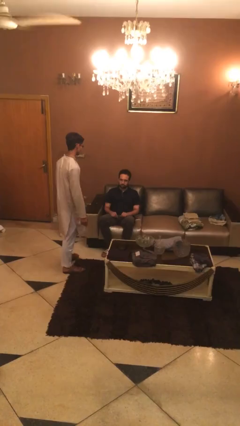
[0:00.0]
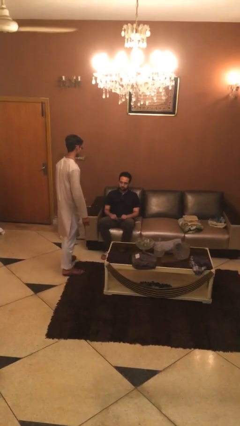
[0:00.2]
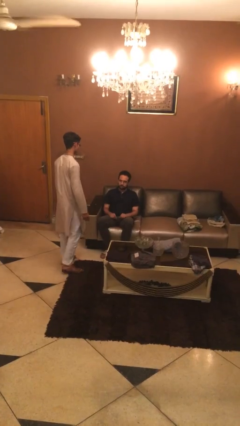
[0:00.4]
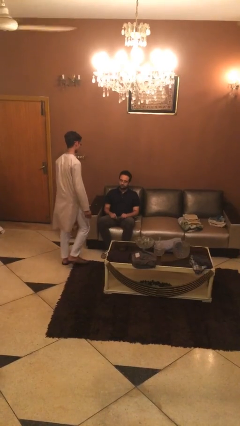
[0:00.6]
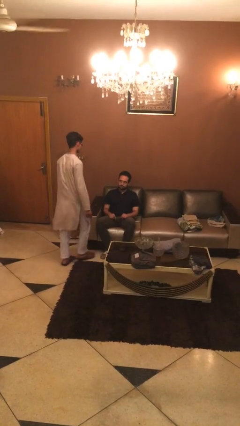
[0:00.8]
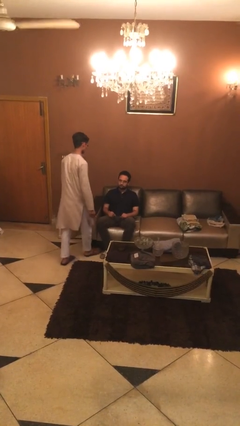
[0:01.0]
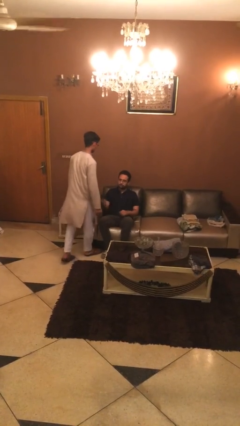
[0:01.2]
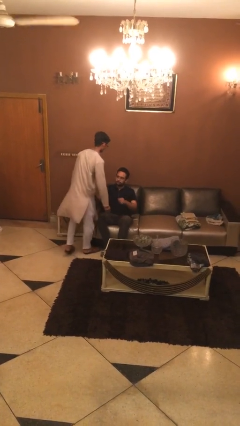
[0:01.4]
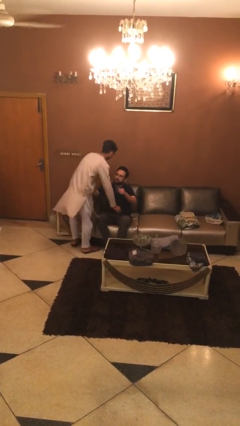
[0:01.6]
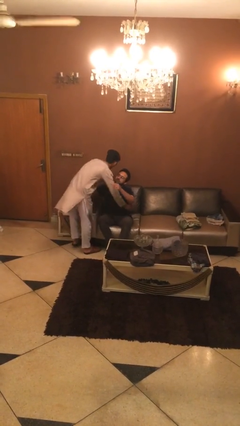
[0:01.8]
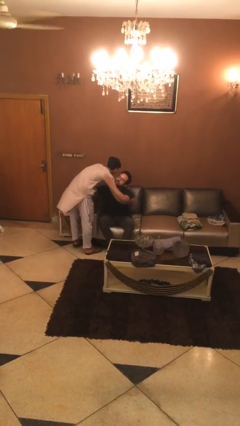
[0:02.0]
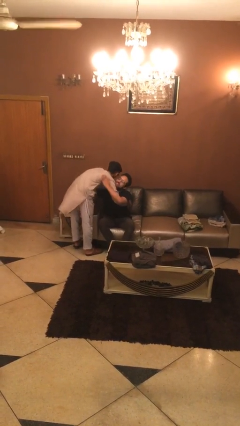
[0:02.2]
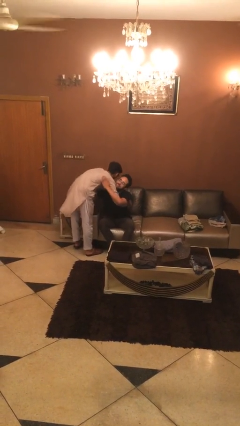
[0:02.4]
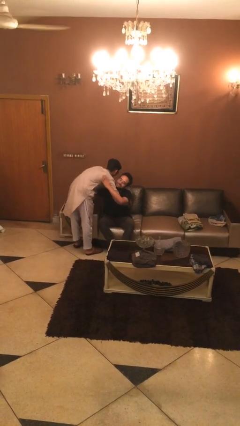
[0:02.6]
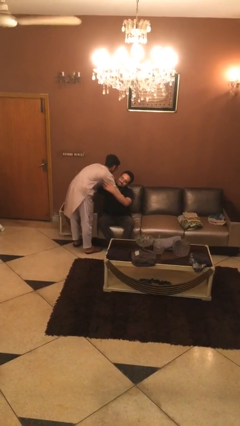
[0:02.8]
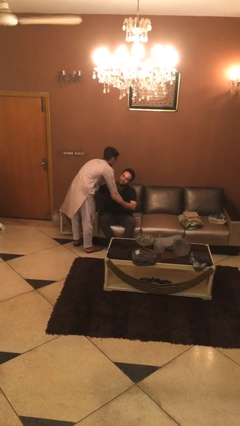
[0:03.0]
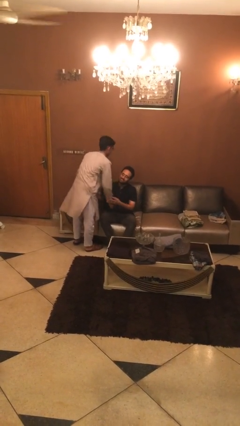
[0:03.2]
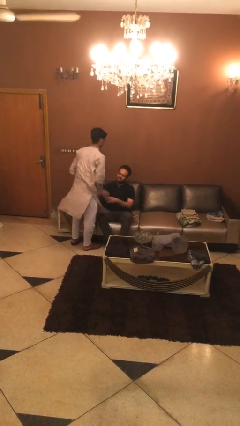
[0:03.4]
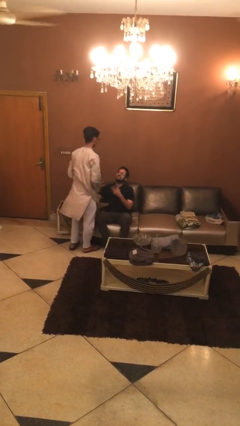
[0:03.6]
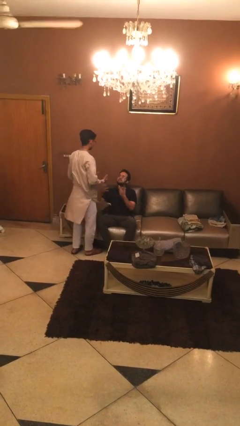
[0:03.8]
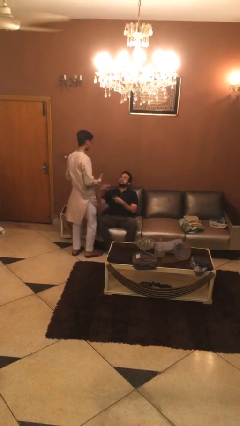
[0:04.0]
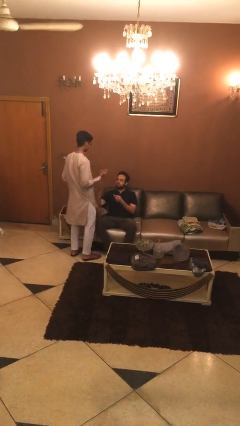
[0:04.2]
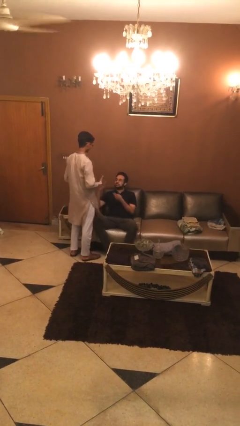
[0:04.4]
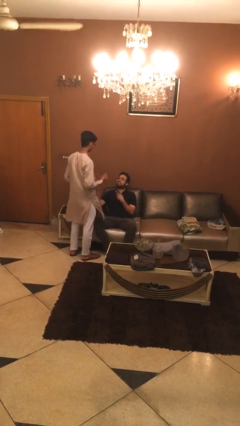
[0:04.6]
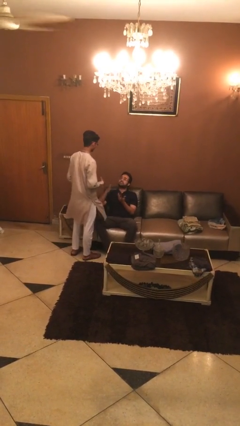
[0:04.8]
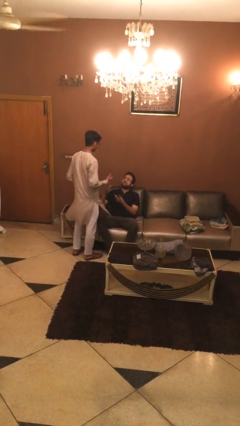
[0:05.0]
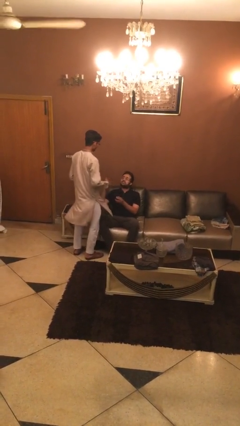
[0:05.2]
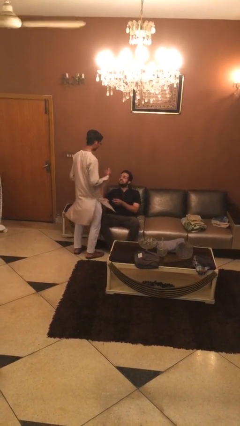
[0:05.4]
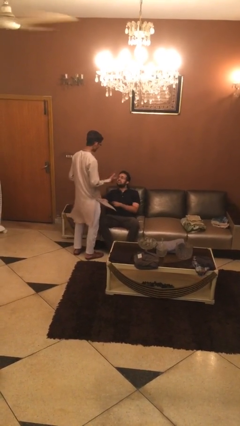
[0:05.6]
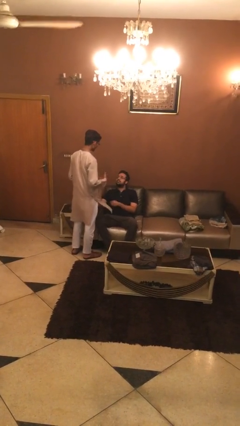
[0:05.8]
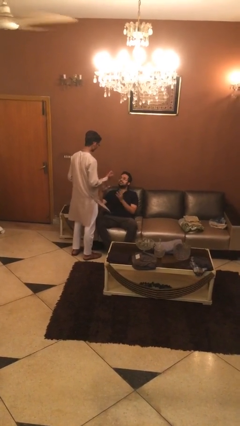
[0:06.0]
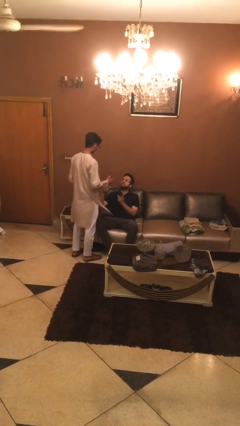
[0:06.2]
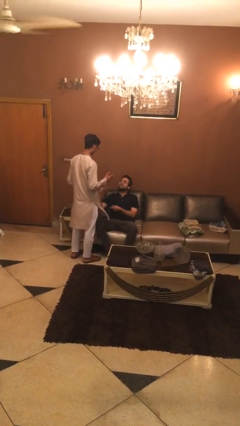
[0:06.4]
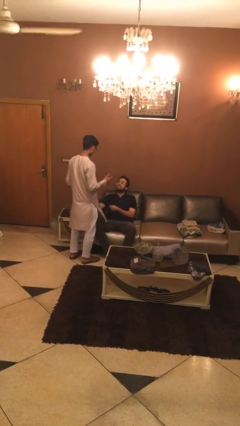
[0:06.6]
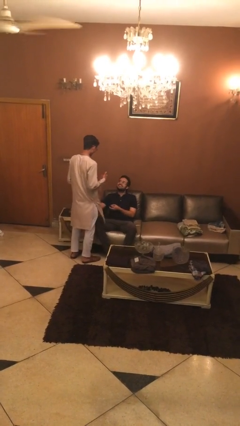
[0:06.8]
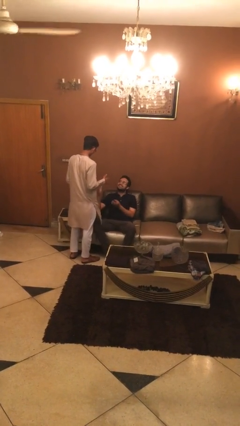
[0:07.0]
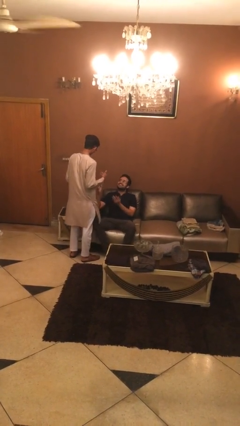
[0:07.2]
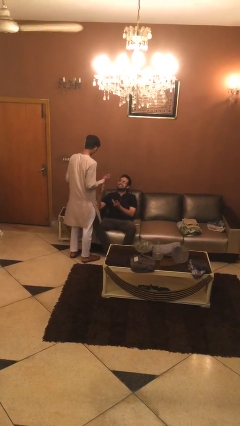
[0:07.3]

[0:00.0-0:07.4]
person embraces person

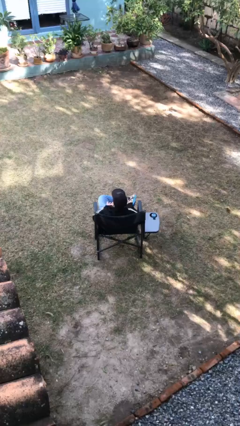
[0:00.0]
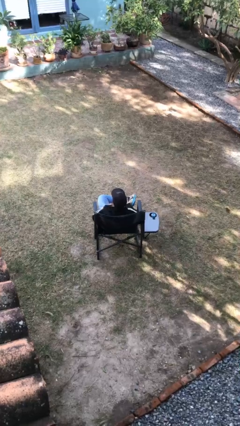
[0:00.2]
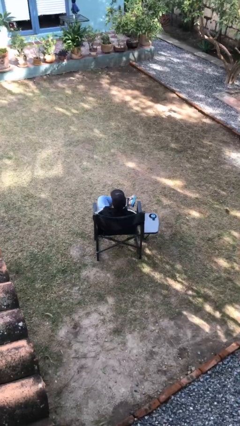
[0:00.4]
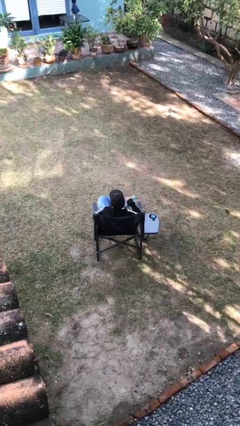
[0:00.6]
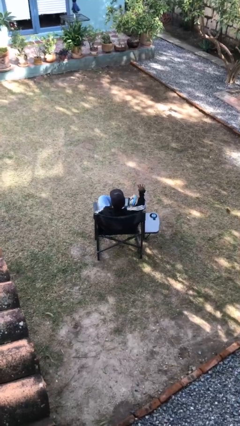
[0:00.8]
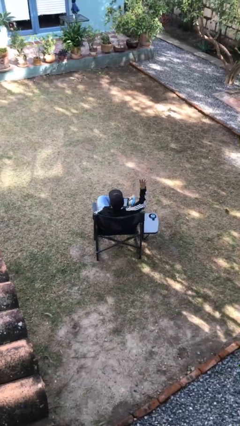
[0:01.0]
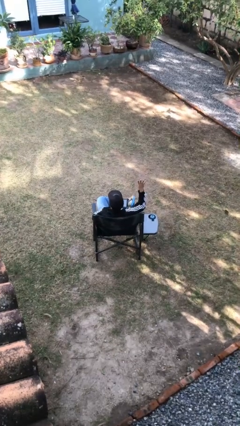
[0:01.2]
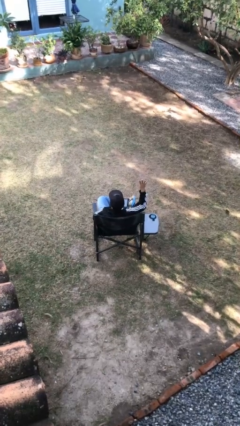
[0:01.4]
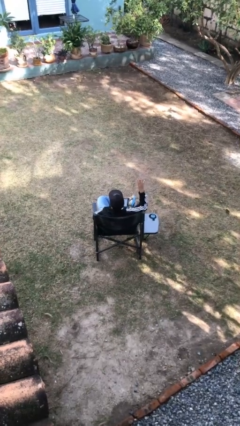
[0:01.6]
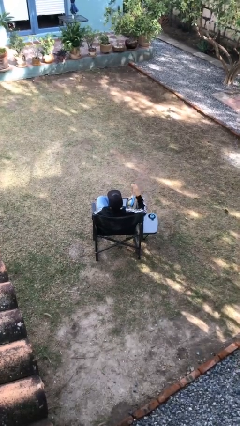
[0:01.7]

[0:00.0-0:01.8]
person gestures number four

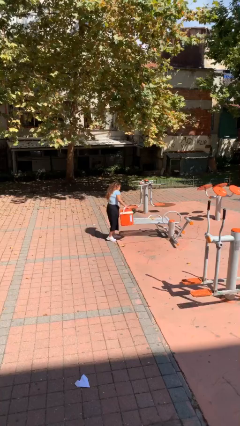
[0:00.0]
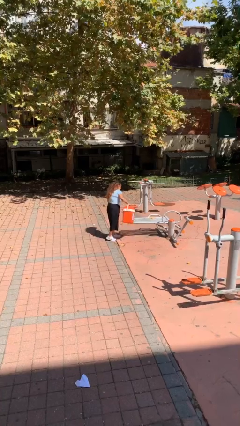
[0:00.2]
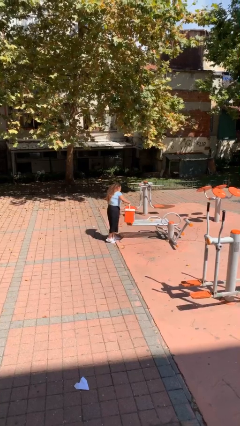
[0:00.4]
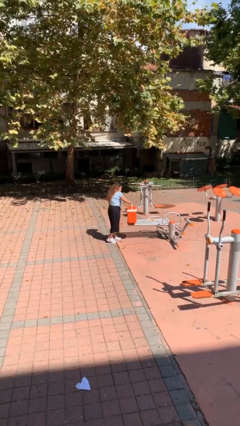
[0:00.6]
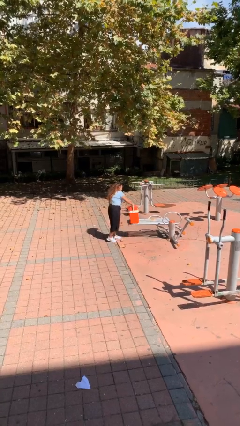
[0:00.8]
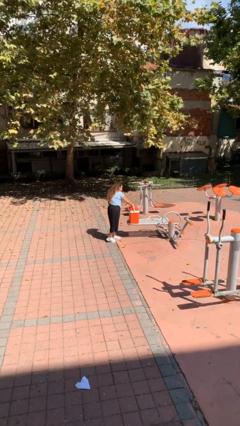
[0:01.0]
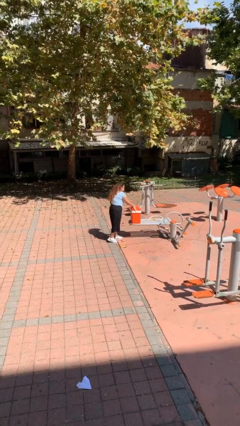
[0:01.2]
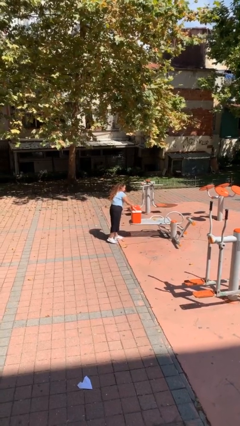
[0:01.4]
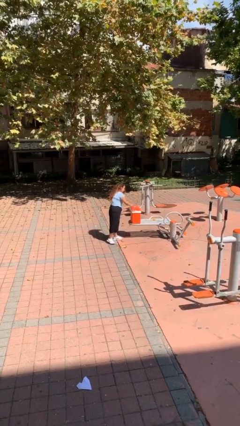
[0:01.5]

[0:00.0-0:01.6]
person puts down object on table

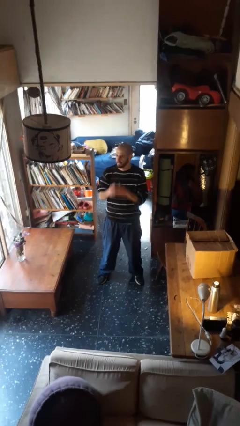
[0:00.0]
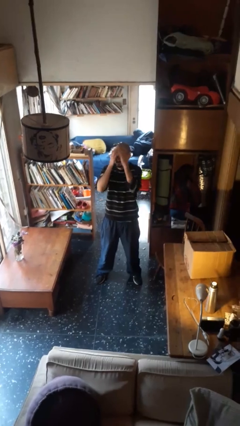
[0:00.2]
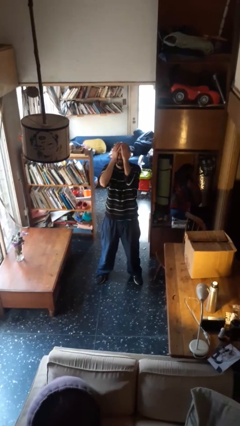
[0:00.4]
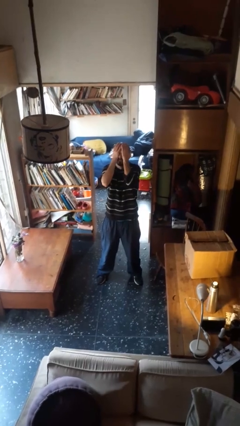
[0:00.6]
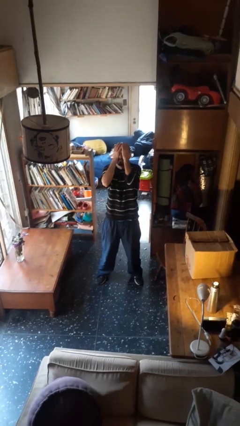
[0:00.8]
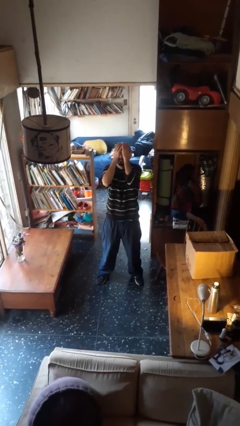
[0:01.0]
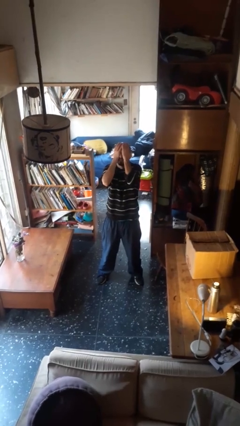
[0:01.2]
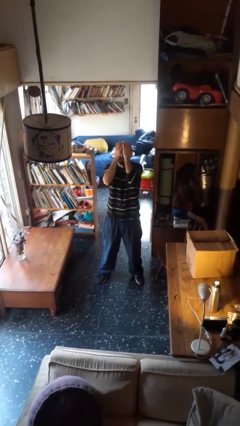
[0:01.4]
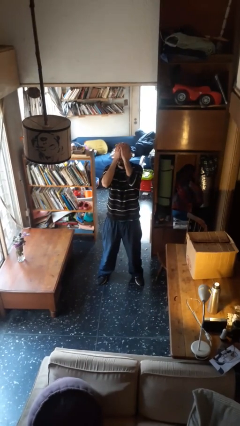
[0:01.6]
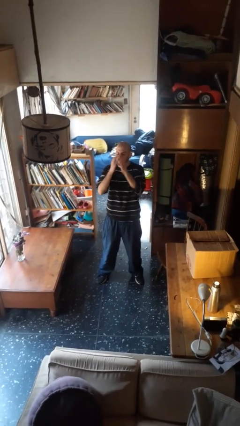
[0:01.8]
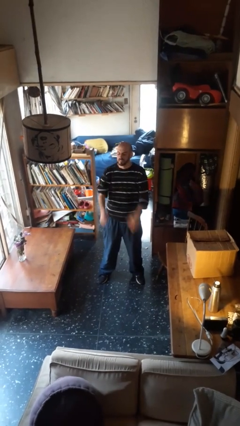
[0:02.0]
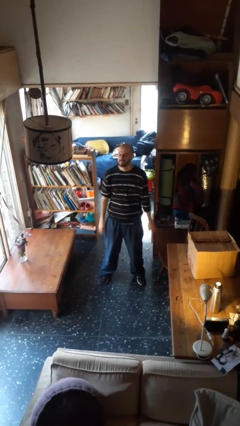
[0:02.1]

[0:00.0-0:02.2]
person covers face with hands

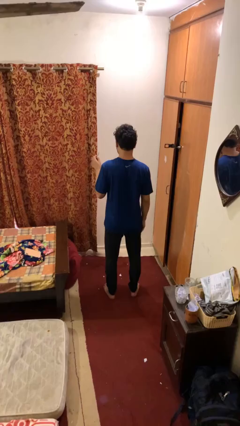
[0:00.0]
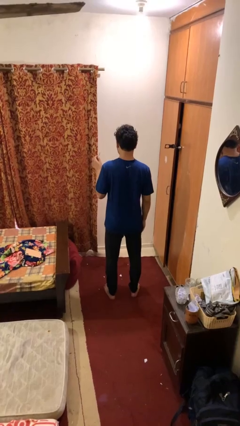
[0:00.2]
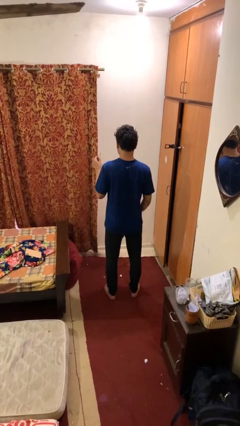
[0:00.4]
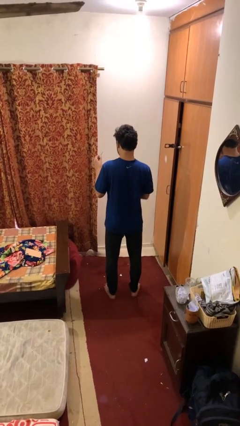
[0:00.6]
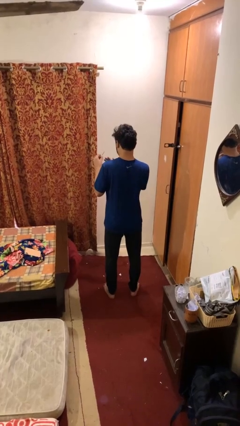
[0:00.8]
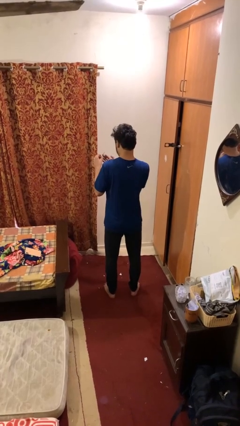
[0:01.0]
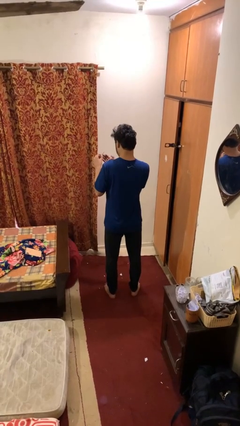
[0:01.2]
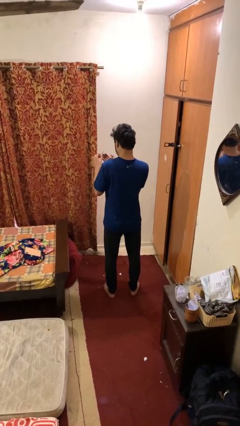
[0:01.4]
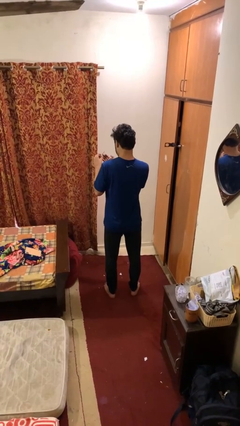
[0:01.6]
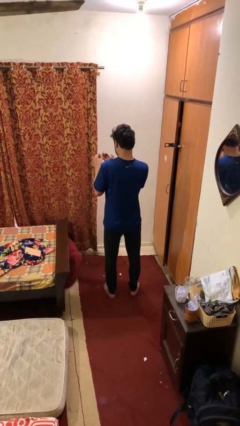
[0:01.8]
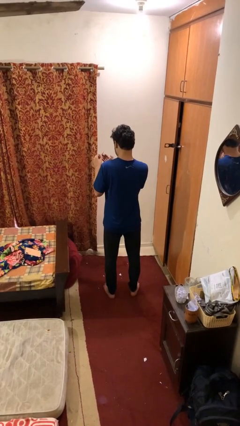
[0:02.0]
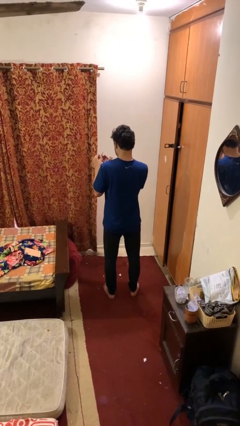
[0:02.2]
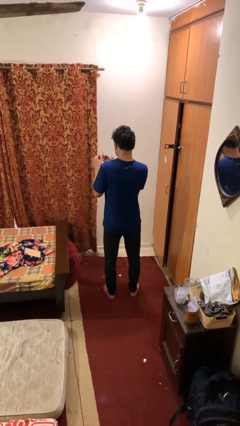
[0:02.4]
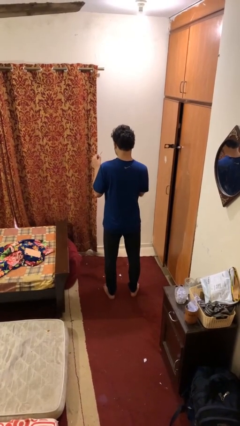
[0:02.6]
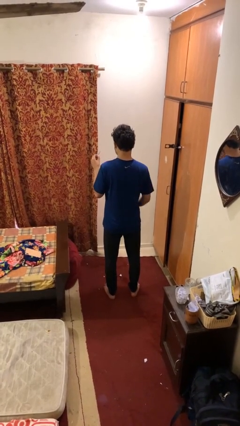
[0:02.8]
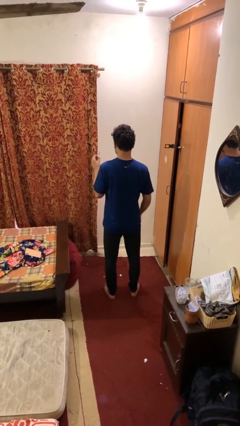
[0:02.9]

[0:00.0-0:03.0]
person files fingernails

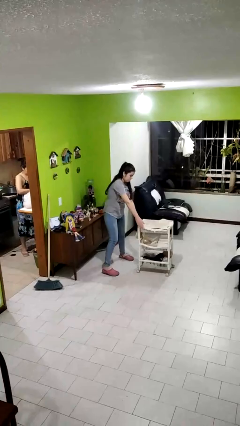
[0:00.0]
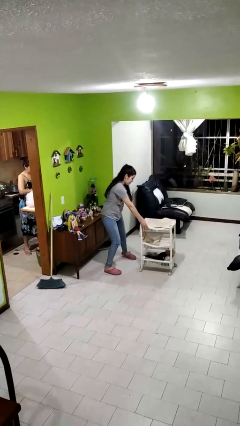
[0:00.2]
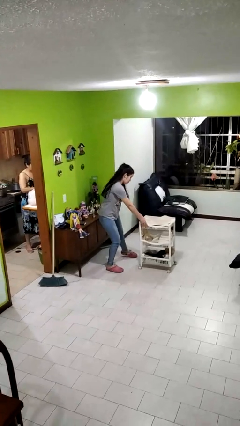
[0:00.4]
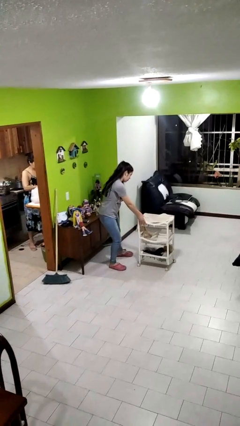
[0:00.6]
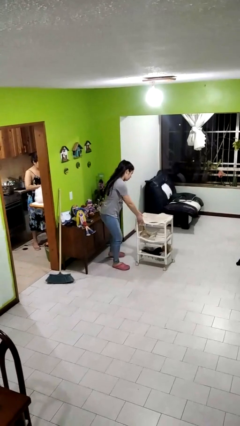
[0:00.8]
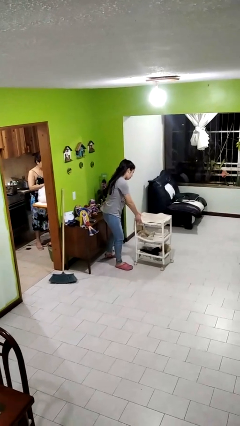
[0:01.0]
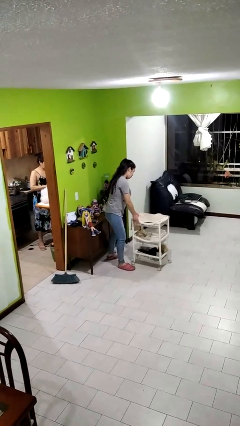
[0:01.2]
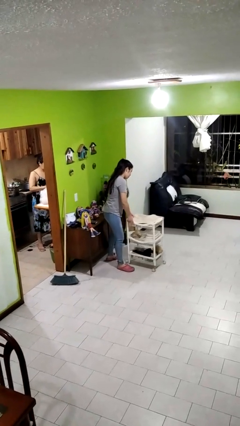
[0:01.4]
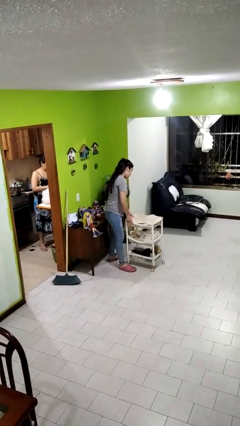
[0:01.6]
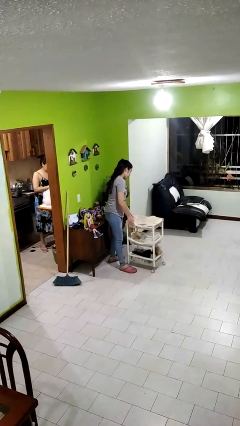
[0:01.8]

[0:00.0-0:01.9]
person pulls wheeled cart
